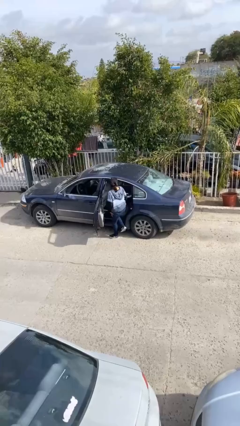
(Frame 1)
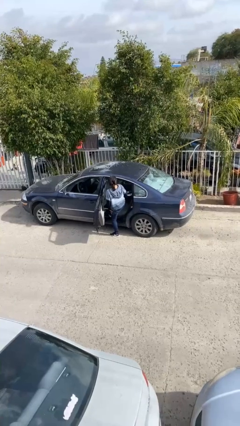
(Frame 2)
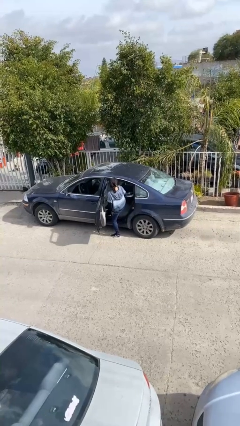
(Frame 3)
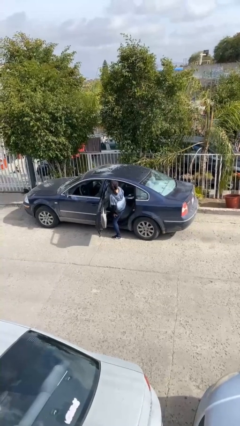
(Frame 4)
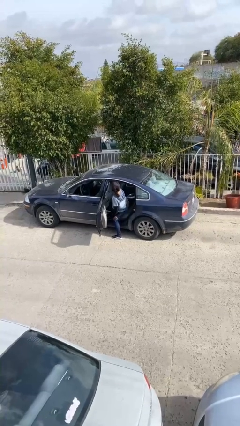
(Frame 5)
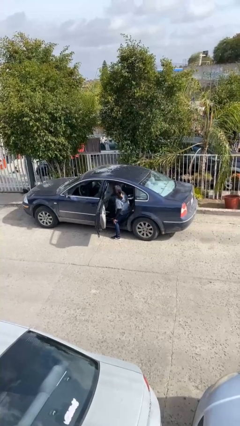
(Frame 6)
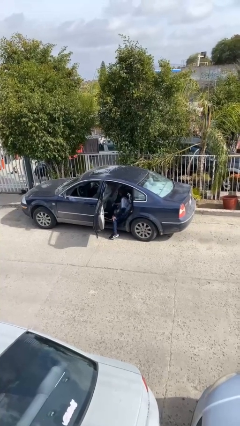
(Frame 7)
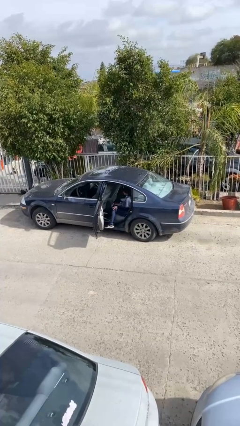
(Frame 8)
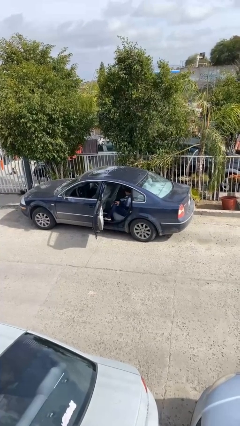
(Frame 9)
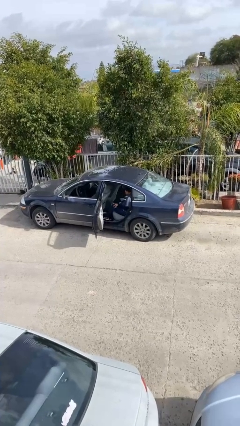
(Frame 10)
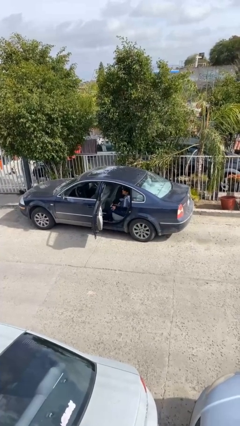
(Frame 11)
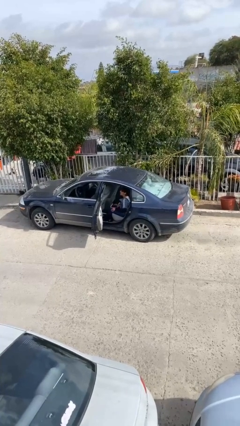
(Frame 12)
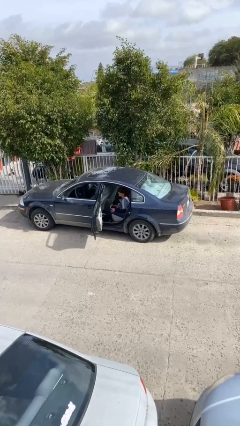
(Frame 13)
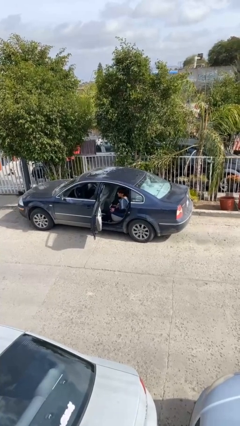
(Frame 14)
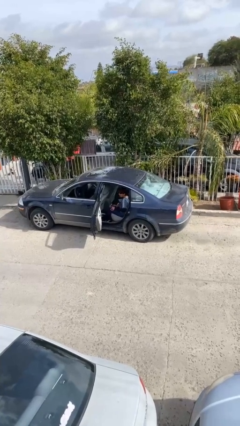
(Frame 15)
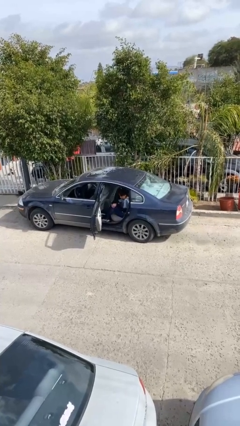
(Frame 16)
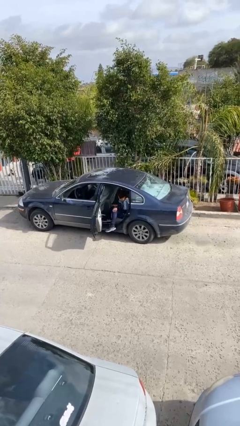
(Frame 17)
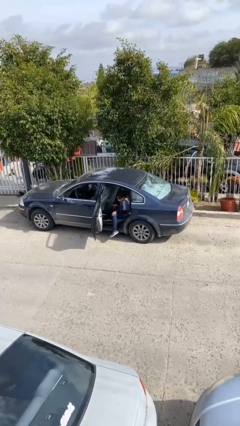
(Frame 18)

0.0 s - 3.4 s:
person enters car

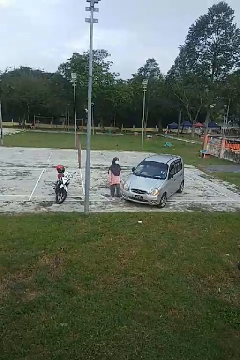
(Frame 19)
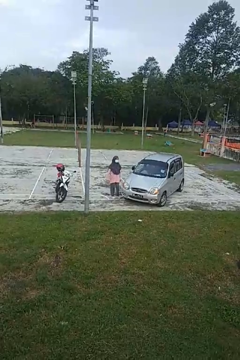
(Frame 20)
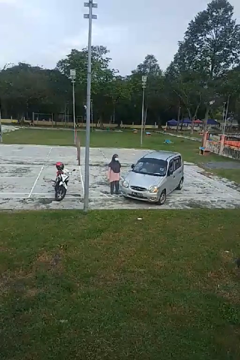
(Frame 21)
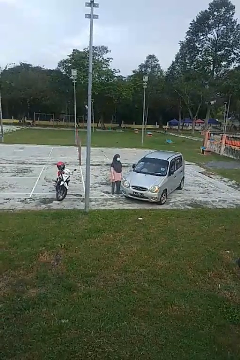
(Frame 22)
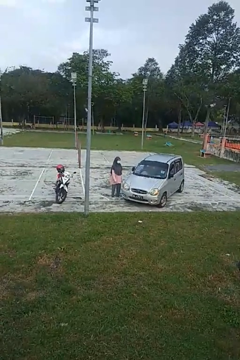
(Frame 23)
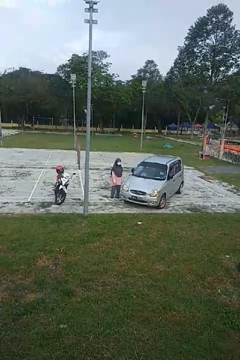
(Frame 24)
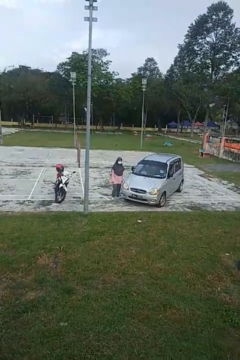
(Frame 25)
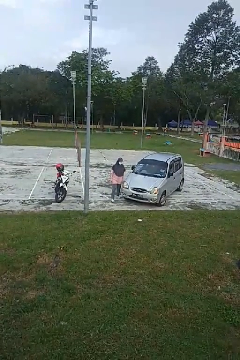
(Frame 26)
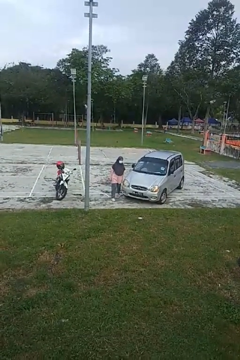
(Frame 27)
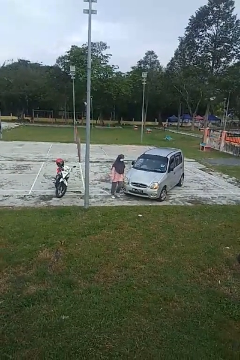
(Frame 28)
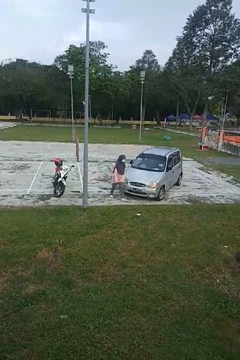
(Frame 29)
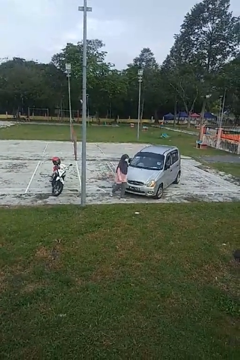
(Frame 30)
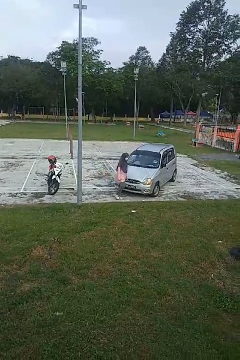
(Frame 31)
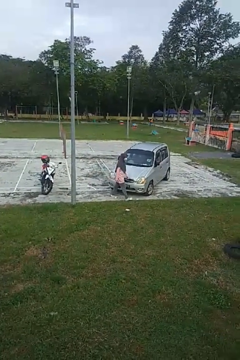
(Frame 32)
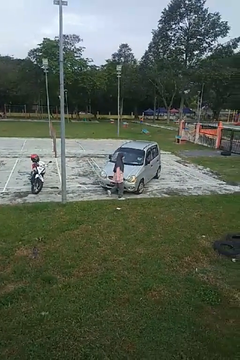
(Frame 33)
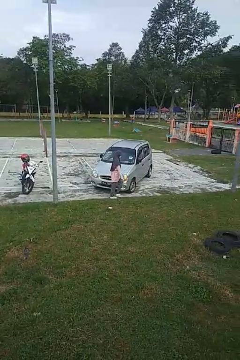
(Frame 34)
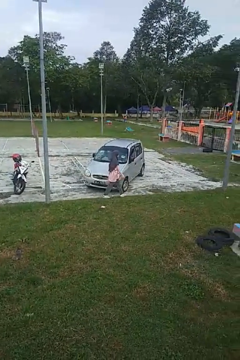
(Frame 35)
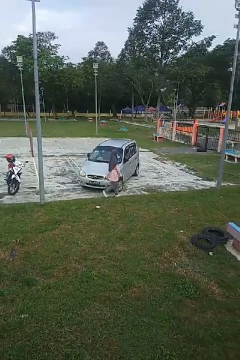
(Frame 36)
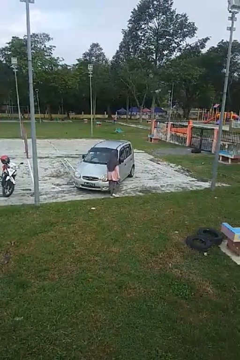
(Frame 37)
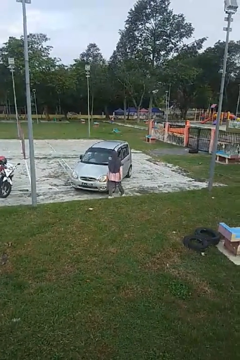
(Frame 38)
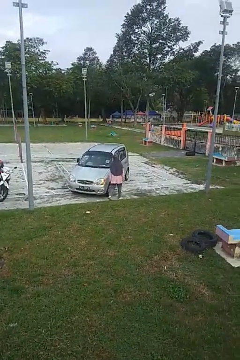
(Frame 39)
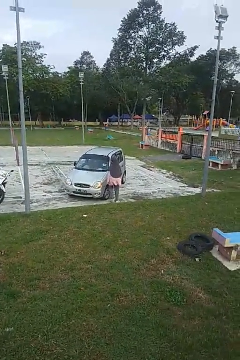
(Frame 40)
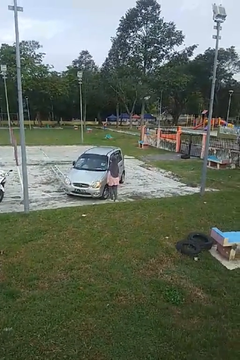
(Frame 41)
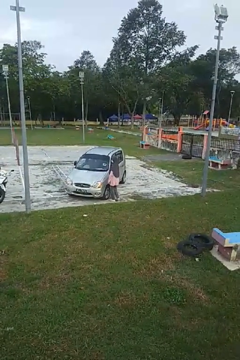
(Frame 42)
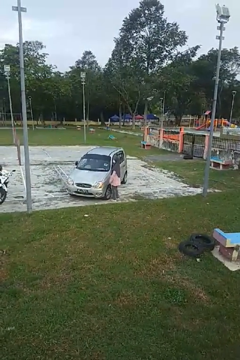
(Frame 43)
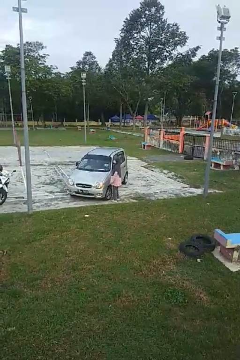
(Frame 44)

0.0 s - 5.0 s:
person walks around car

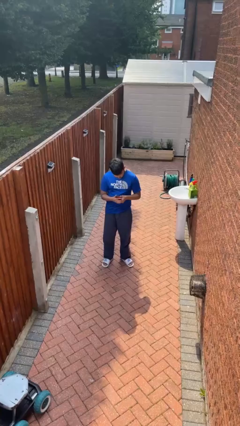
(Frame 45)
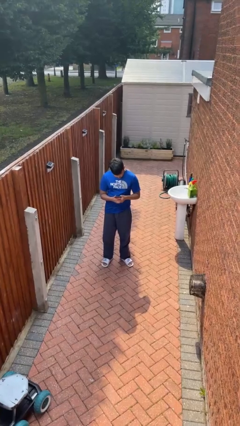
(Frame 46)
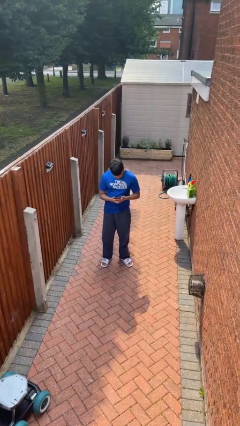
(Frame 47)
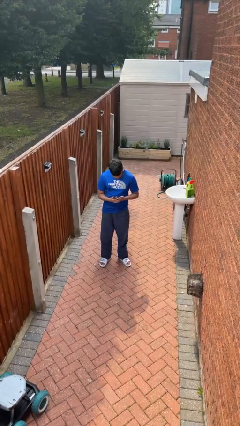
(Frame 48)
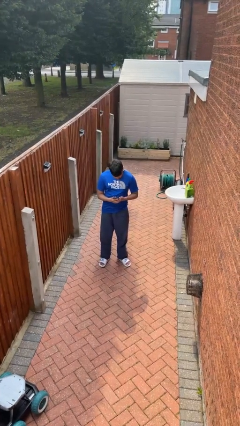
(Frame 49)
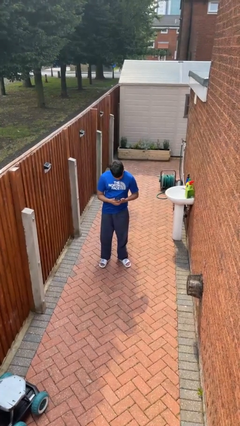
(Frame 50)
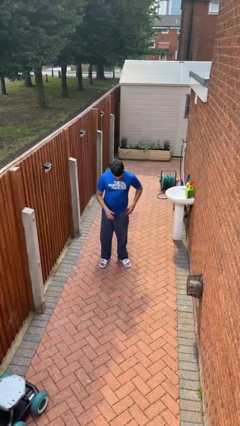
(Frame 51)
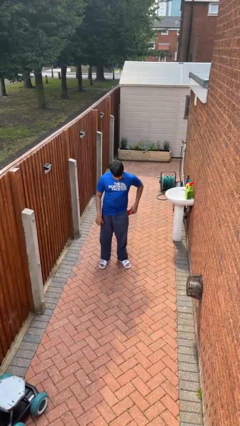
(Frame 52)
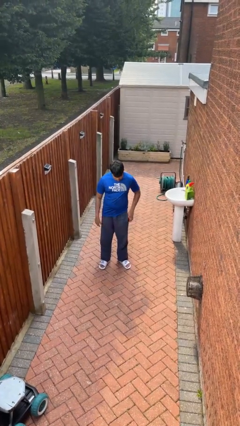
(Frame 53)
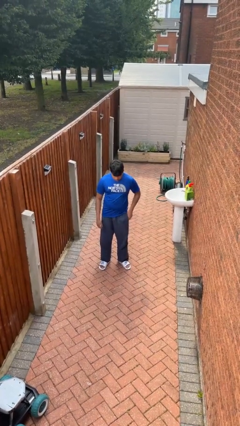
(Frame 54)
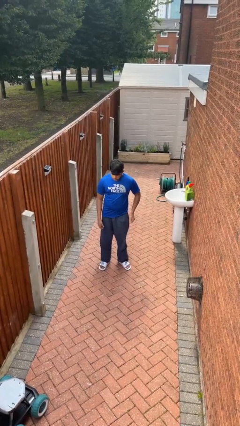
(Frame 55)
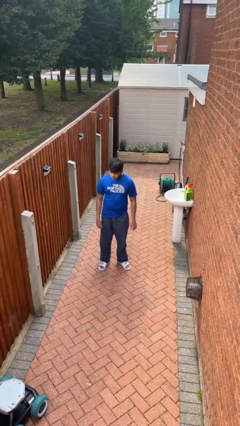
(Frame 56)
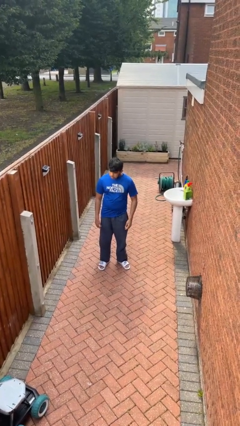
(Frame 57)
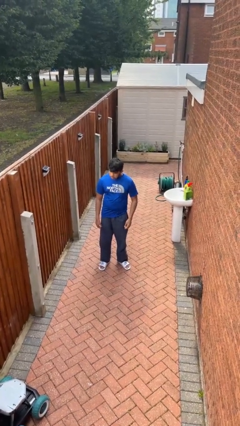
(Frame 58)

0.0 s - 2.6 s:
person puts phone into pocket

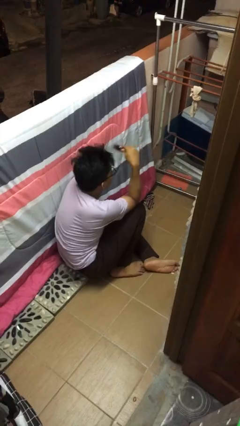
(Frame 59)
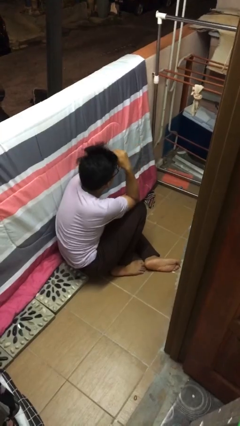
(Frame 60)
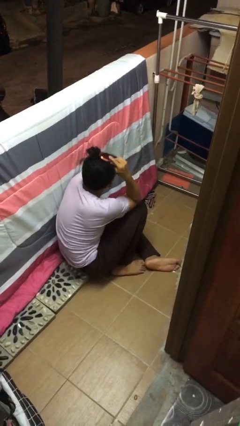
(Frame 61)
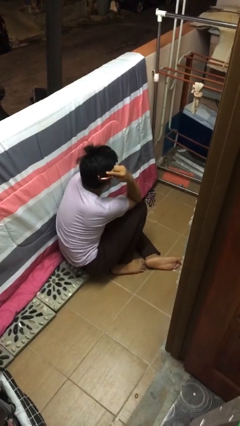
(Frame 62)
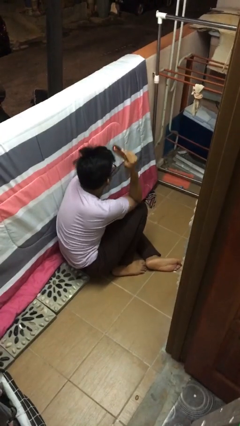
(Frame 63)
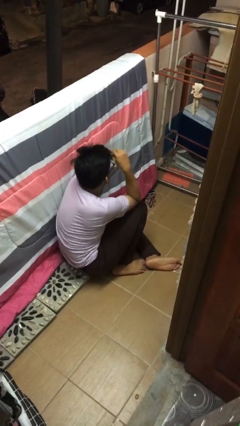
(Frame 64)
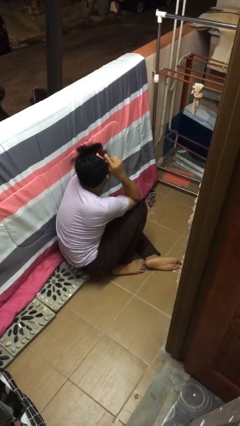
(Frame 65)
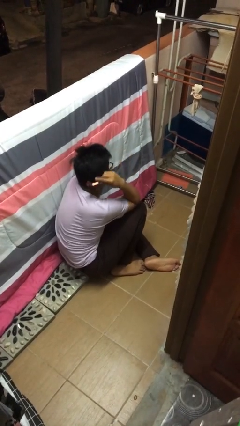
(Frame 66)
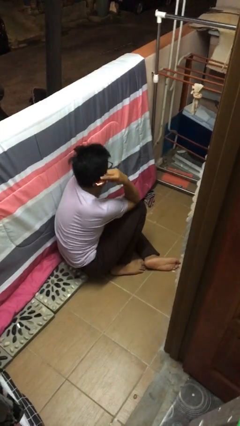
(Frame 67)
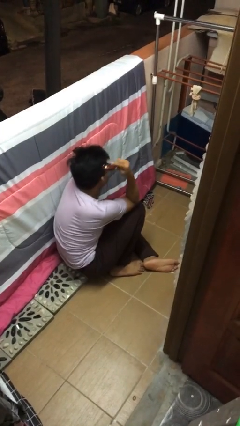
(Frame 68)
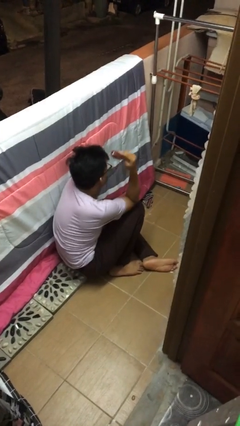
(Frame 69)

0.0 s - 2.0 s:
person brushes hair

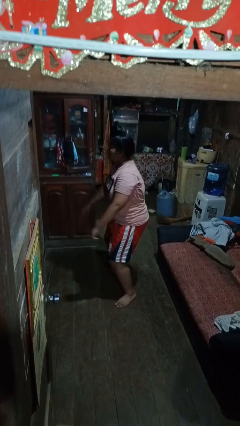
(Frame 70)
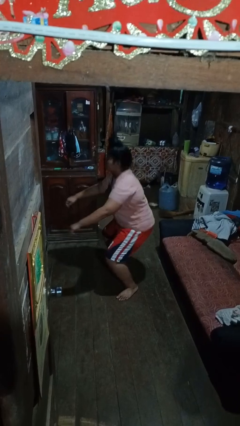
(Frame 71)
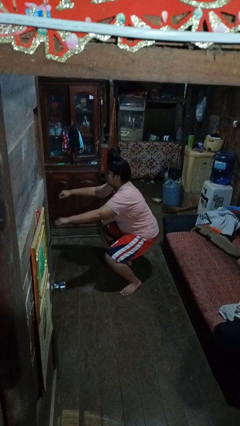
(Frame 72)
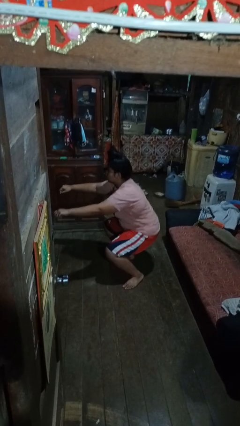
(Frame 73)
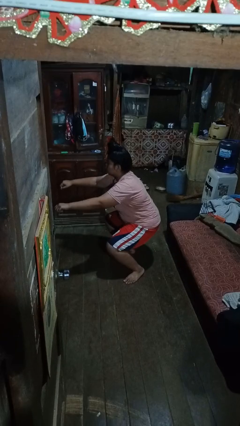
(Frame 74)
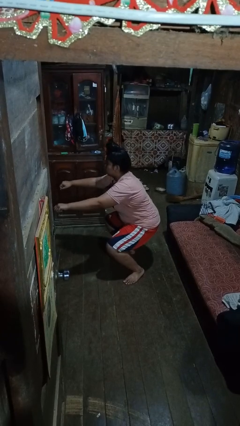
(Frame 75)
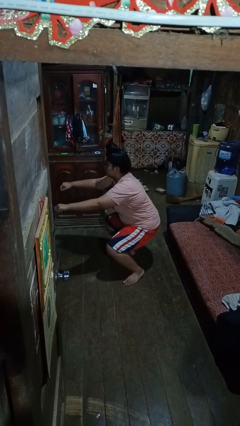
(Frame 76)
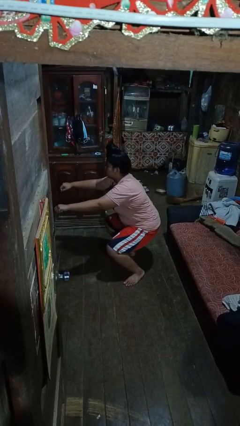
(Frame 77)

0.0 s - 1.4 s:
person squats

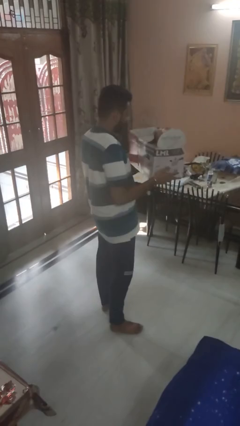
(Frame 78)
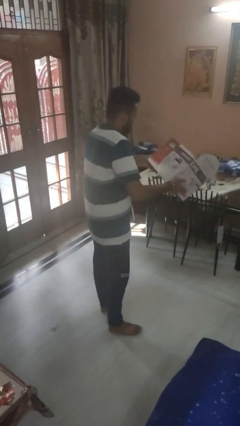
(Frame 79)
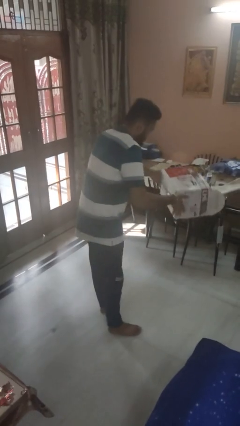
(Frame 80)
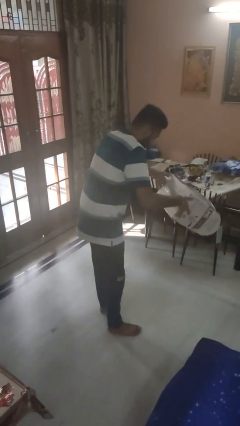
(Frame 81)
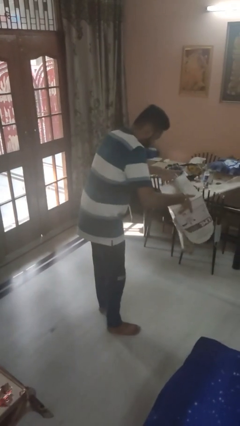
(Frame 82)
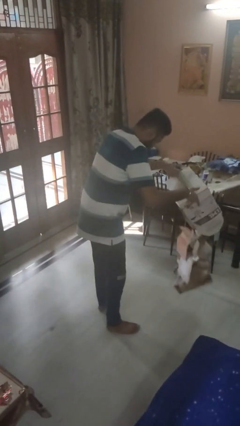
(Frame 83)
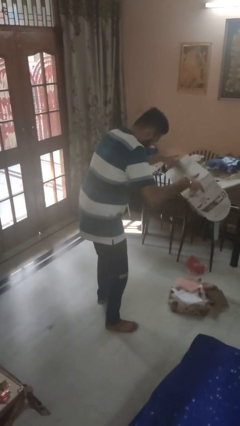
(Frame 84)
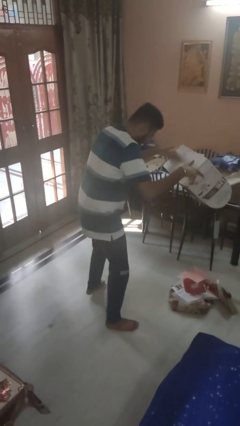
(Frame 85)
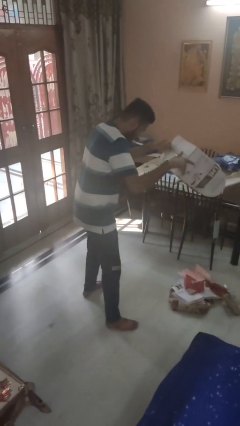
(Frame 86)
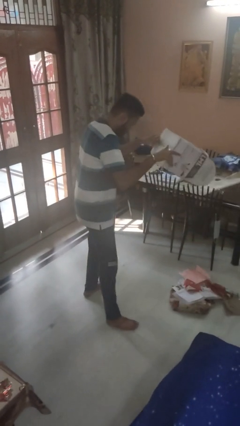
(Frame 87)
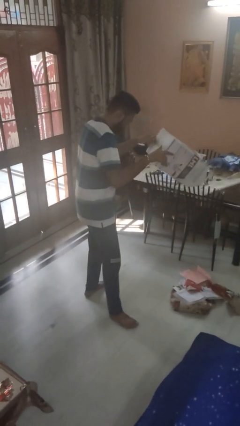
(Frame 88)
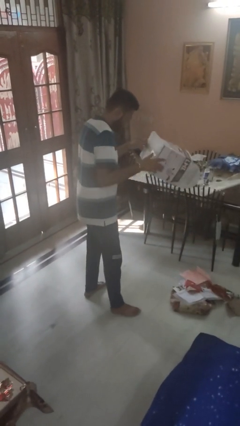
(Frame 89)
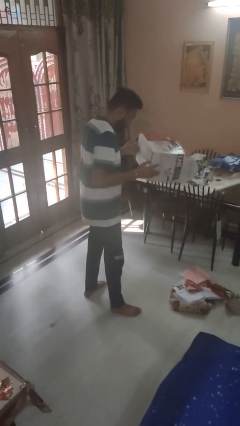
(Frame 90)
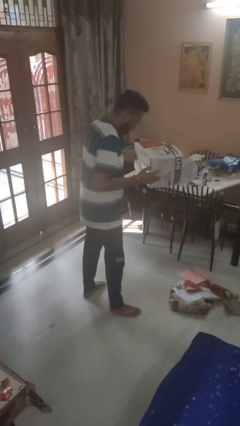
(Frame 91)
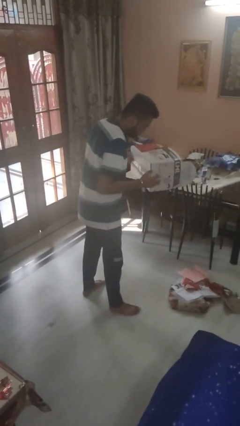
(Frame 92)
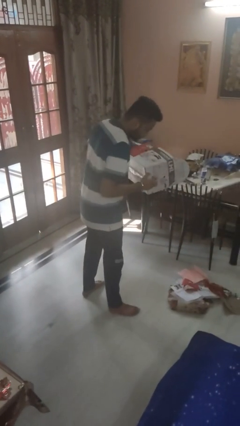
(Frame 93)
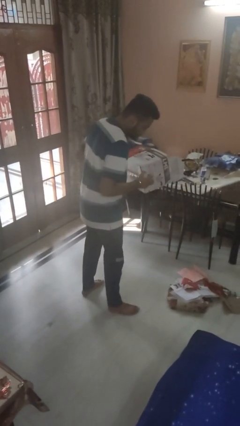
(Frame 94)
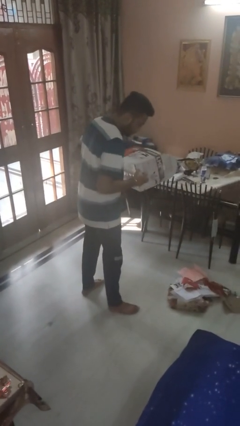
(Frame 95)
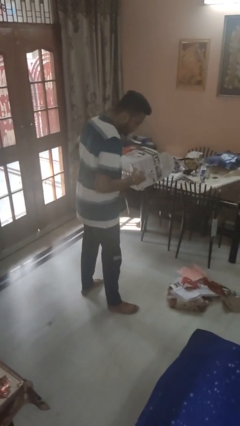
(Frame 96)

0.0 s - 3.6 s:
person unloads box onto floor

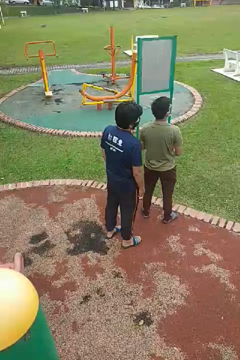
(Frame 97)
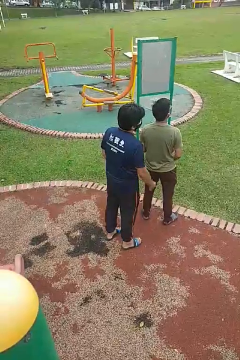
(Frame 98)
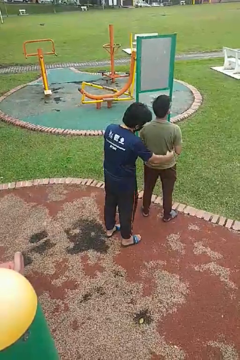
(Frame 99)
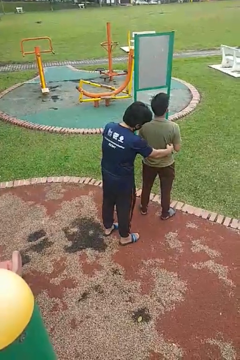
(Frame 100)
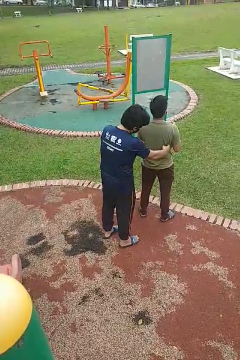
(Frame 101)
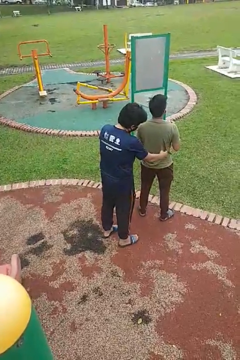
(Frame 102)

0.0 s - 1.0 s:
person tickles person
